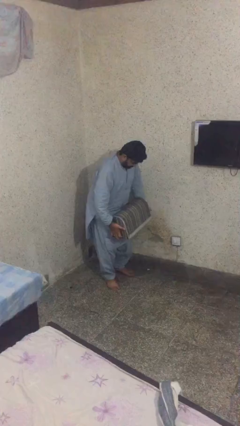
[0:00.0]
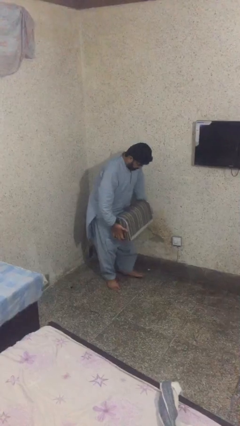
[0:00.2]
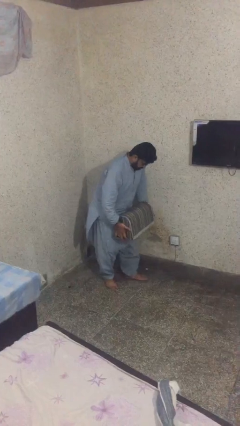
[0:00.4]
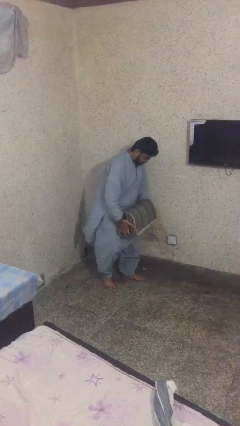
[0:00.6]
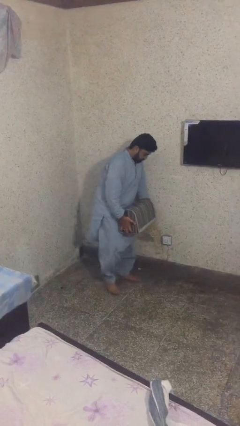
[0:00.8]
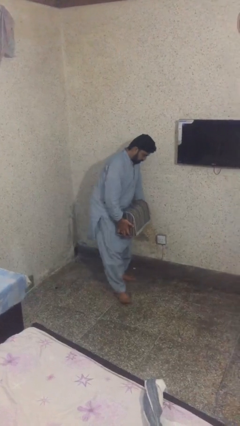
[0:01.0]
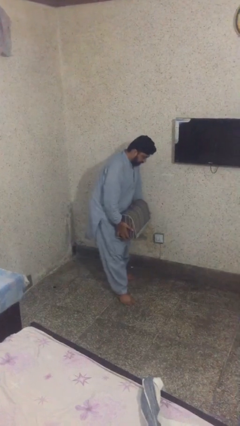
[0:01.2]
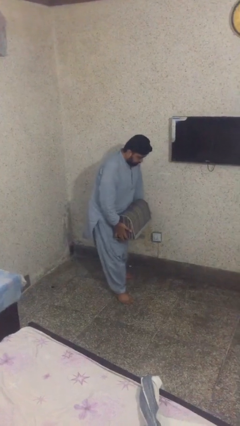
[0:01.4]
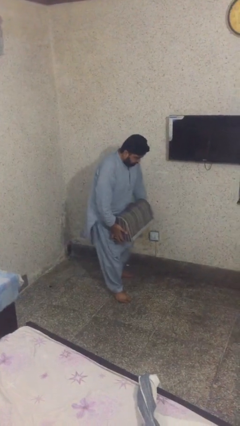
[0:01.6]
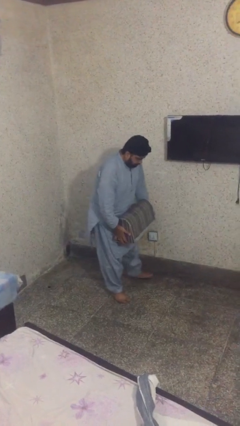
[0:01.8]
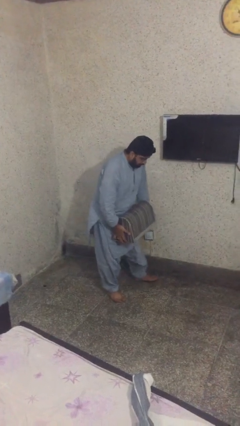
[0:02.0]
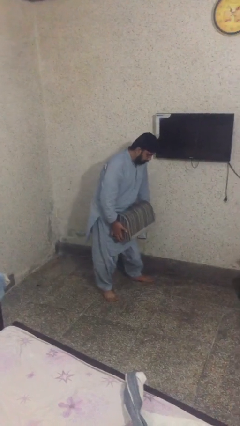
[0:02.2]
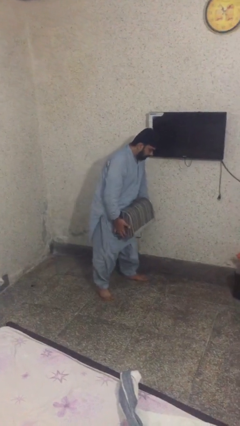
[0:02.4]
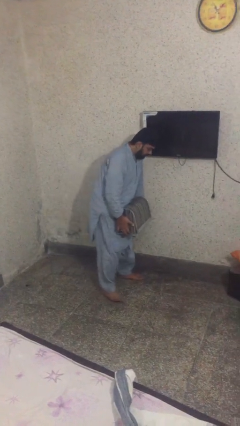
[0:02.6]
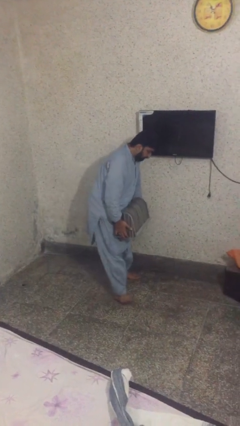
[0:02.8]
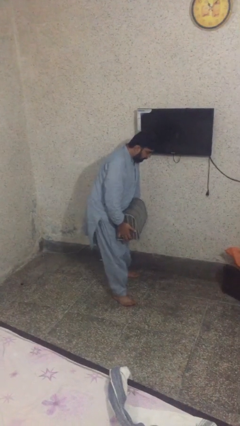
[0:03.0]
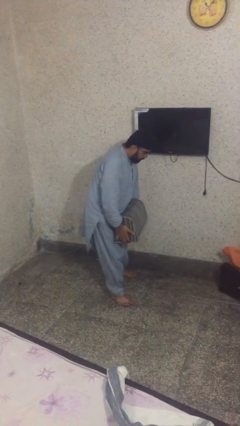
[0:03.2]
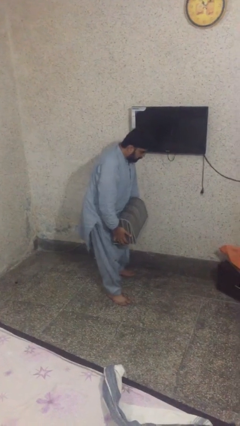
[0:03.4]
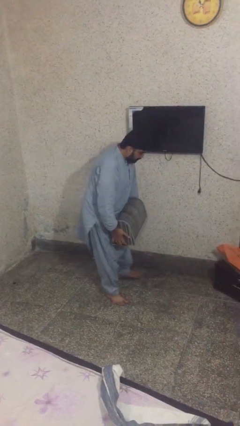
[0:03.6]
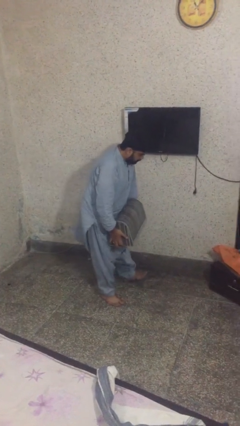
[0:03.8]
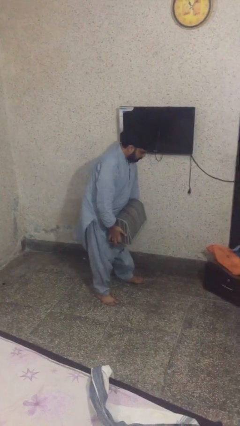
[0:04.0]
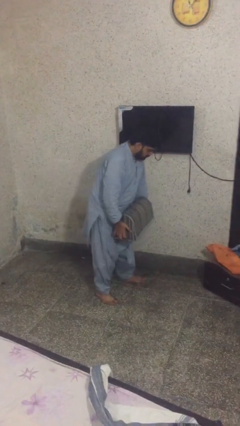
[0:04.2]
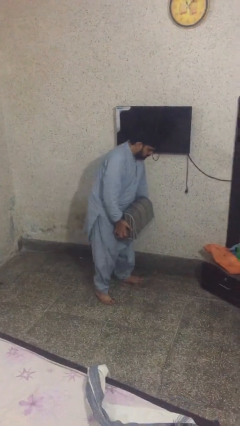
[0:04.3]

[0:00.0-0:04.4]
person carries heavy object

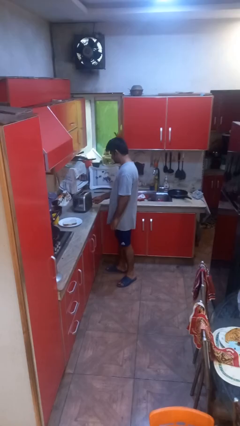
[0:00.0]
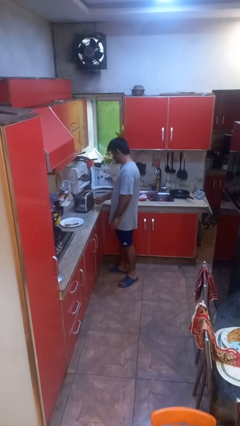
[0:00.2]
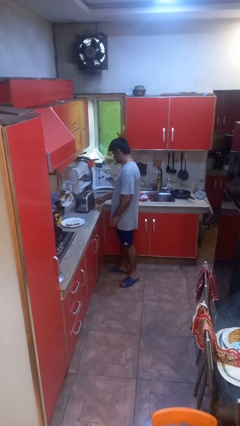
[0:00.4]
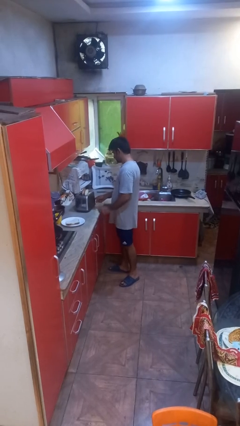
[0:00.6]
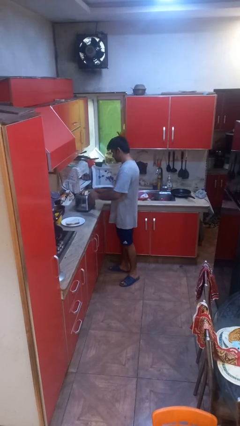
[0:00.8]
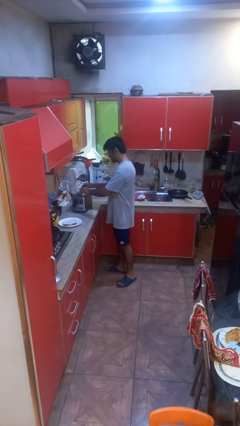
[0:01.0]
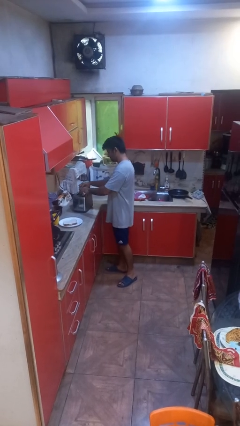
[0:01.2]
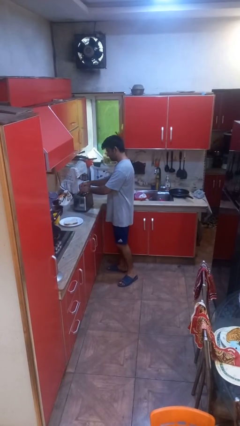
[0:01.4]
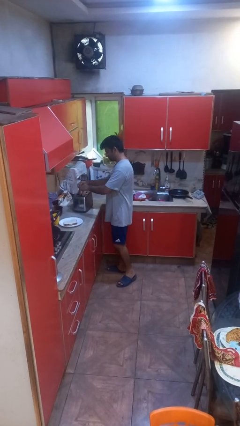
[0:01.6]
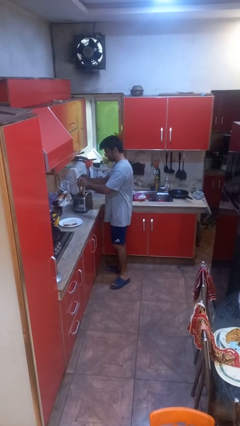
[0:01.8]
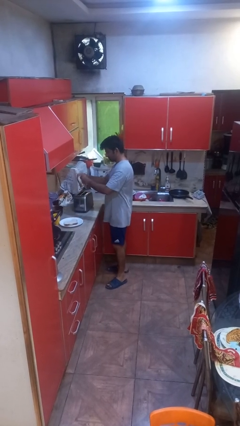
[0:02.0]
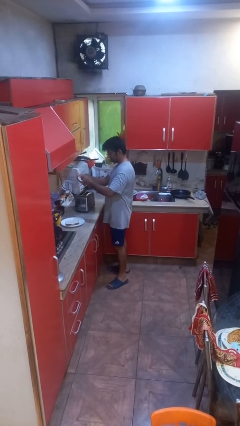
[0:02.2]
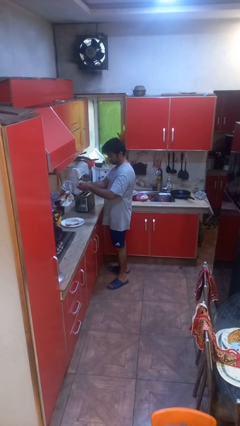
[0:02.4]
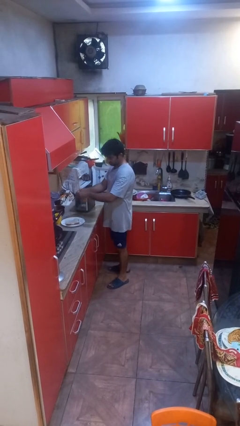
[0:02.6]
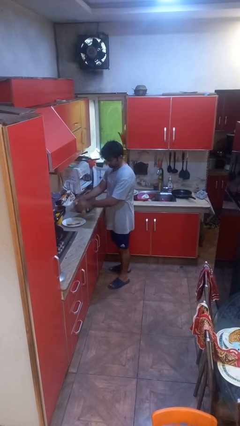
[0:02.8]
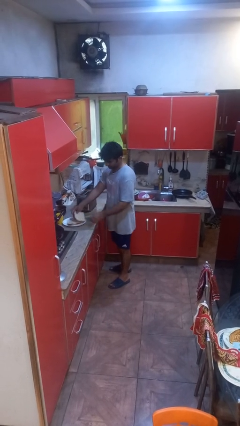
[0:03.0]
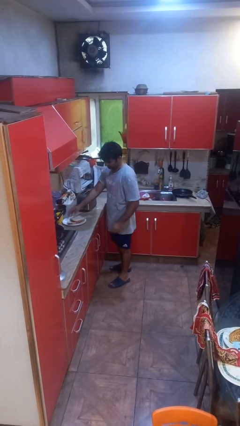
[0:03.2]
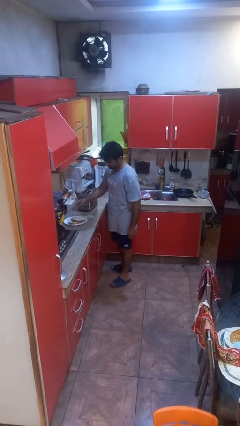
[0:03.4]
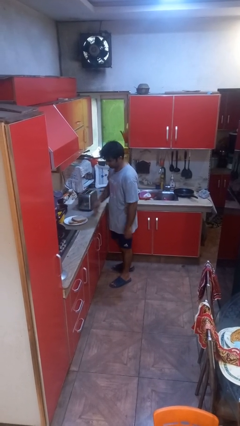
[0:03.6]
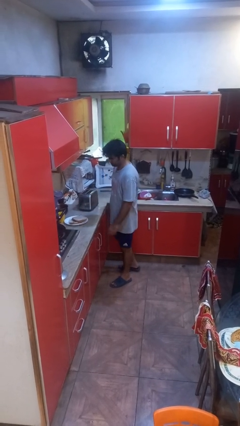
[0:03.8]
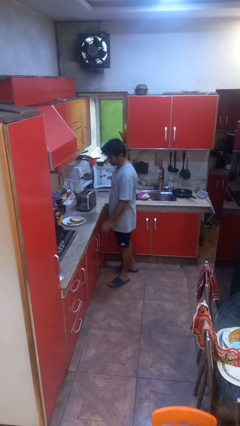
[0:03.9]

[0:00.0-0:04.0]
person takes object from toaster

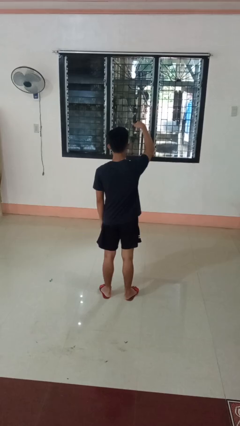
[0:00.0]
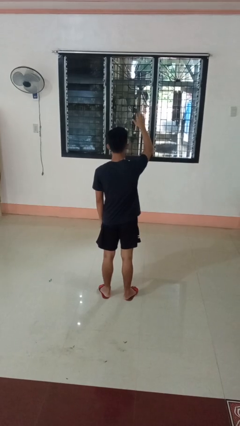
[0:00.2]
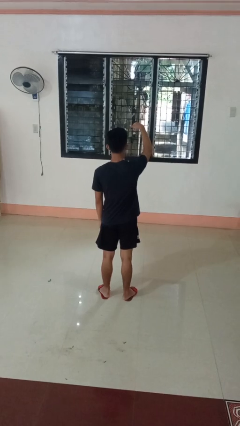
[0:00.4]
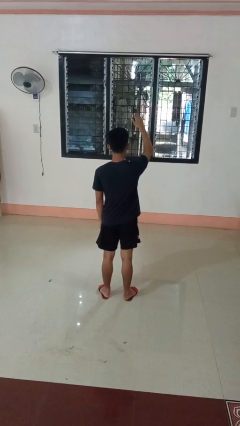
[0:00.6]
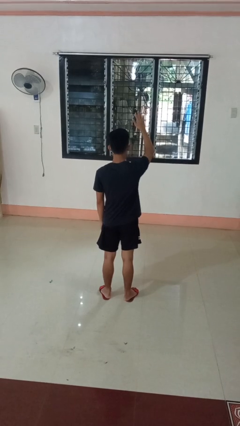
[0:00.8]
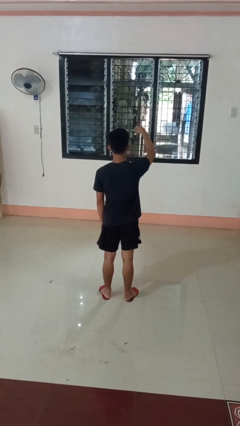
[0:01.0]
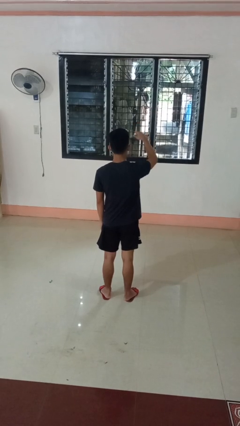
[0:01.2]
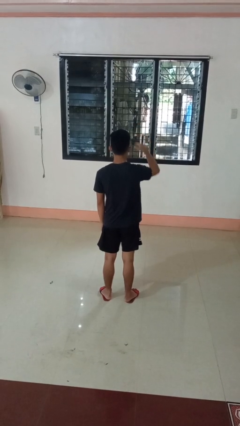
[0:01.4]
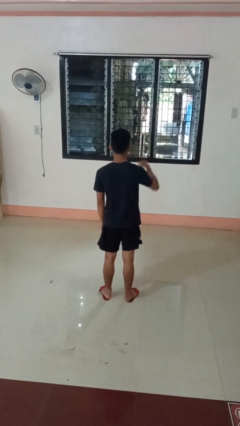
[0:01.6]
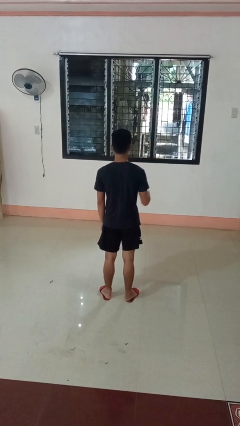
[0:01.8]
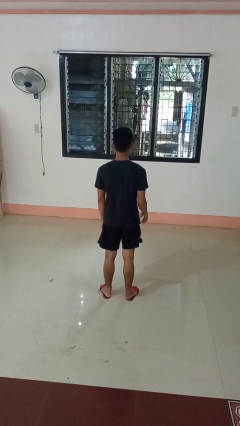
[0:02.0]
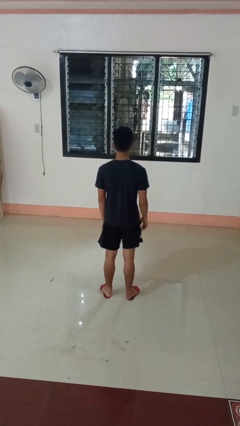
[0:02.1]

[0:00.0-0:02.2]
person gestures come here

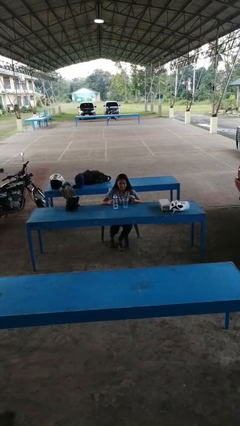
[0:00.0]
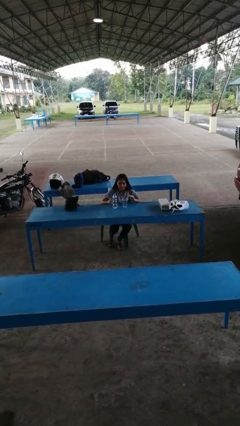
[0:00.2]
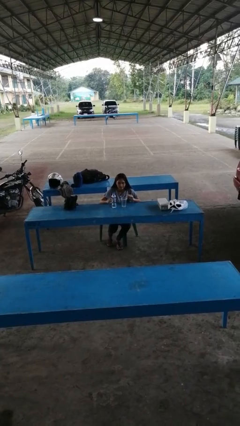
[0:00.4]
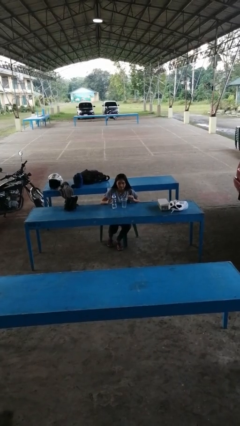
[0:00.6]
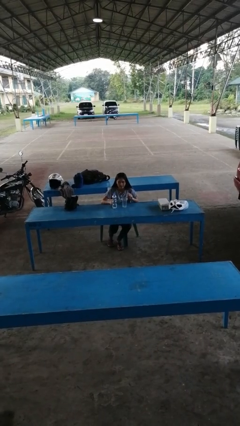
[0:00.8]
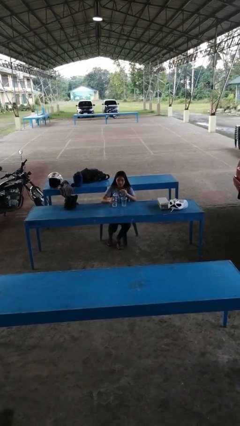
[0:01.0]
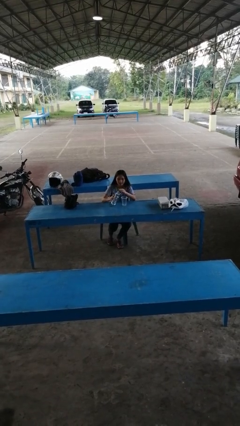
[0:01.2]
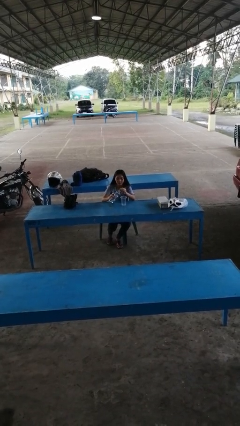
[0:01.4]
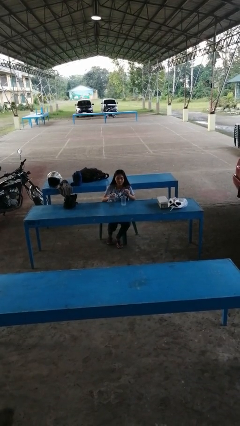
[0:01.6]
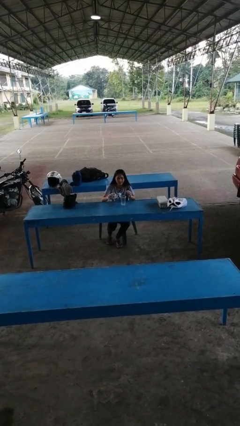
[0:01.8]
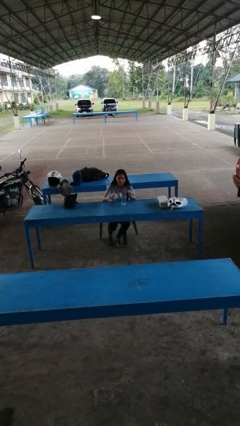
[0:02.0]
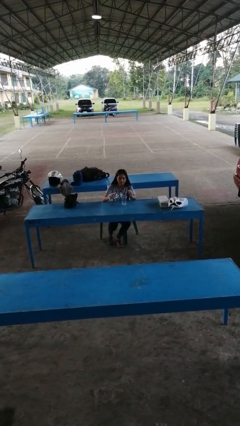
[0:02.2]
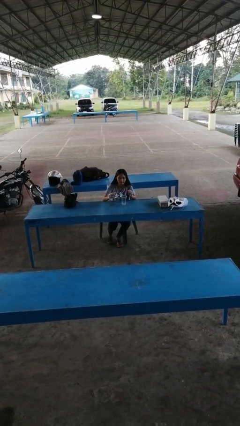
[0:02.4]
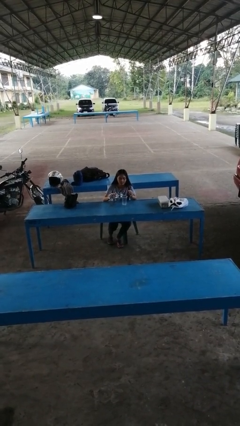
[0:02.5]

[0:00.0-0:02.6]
person pours liquid into cup

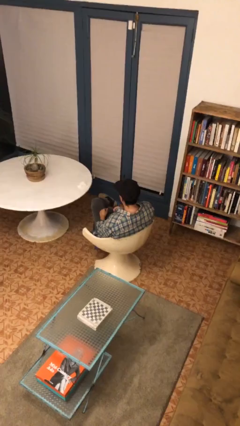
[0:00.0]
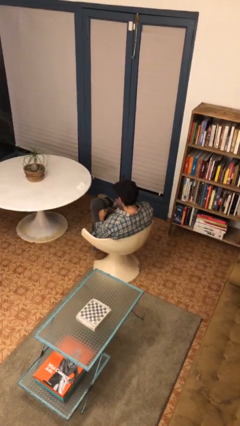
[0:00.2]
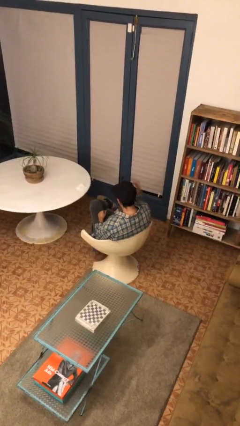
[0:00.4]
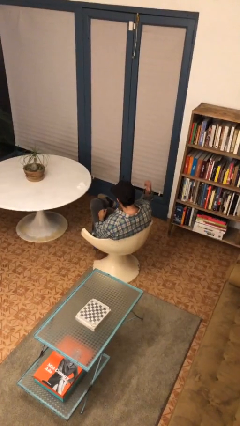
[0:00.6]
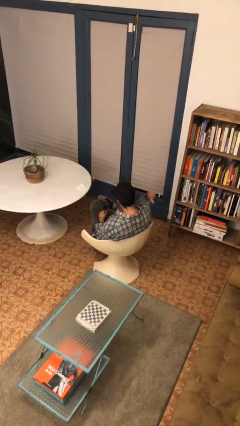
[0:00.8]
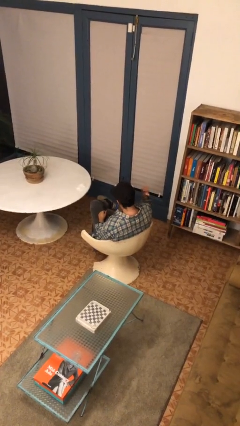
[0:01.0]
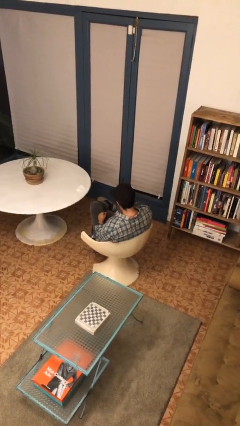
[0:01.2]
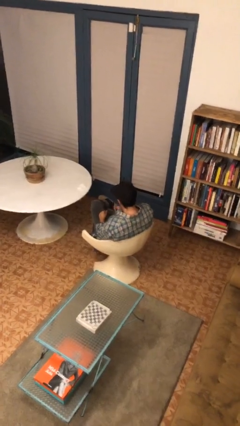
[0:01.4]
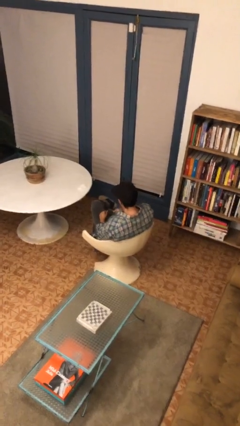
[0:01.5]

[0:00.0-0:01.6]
person gestures behind me

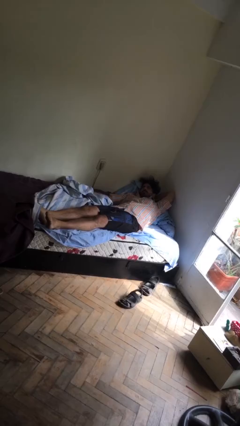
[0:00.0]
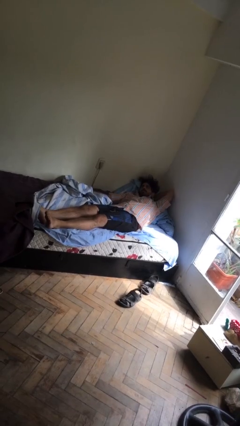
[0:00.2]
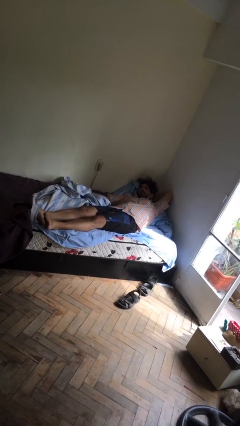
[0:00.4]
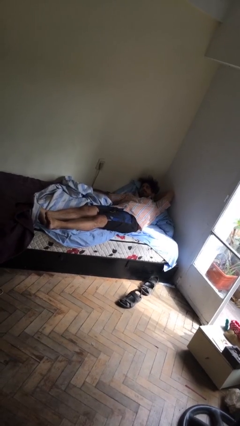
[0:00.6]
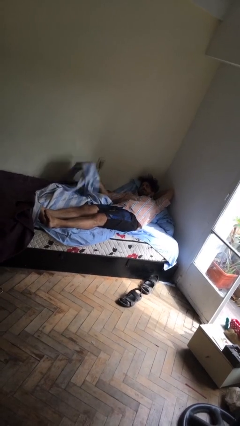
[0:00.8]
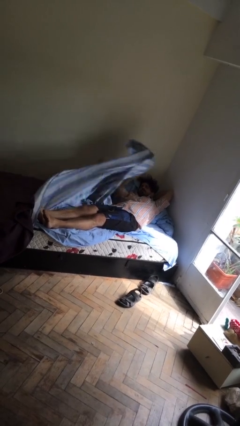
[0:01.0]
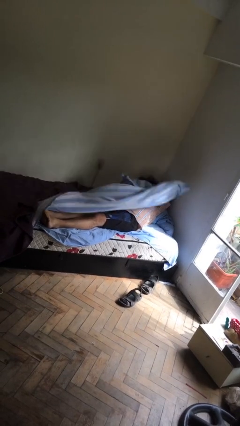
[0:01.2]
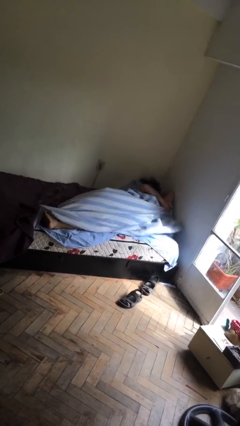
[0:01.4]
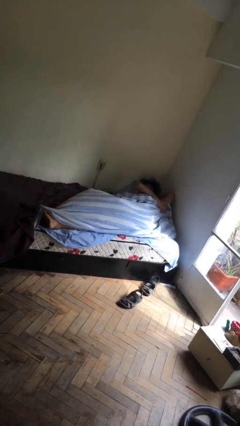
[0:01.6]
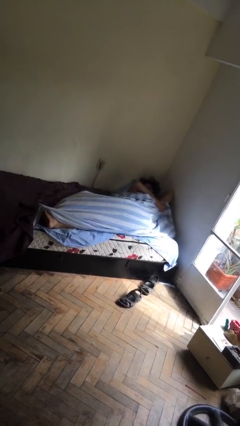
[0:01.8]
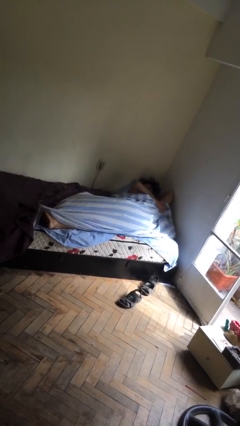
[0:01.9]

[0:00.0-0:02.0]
person covers with bedsheets

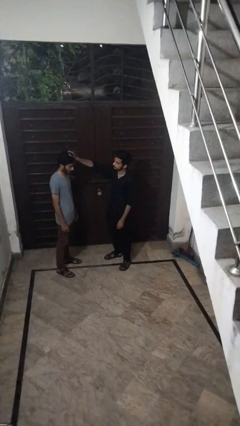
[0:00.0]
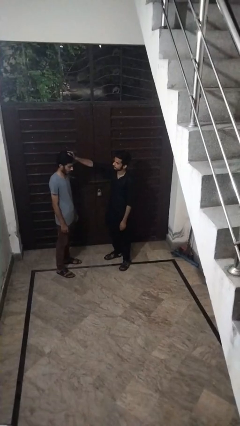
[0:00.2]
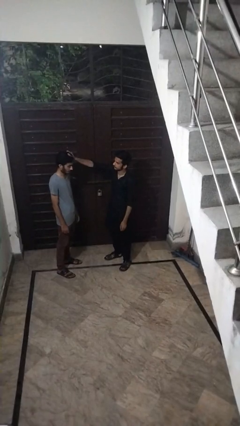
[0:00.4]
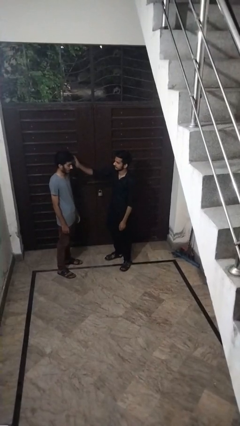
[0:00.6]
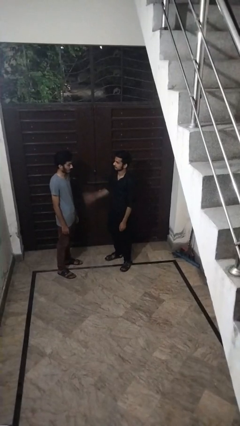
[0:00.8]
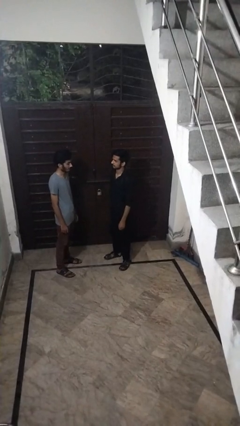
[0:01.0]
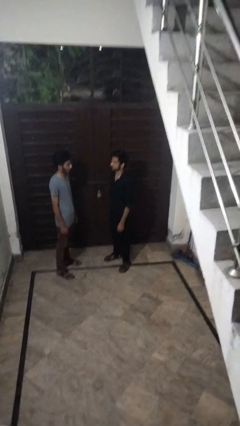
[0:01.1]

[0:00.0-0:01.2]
person grabs person by hair
